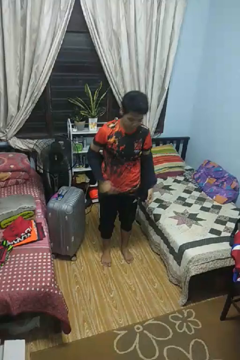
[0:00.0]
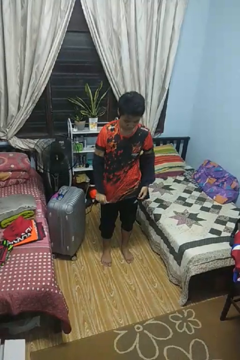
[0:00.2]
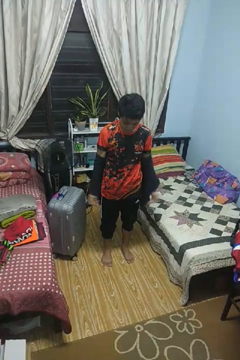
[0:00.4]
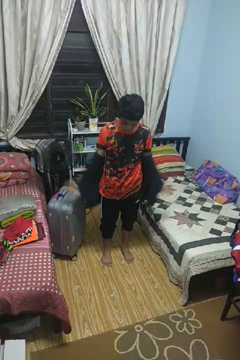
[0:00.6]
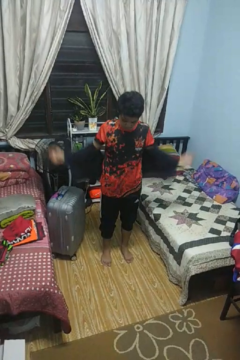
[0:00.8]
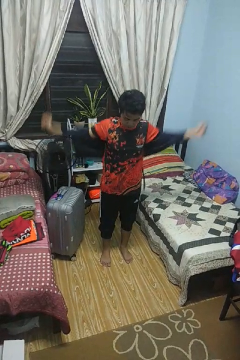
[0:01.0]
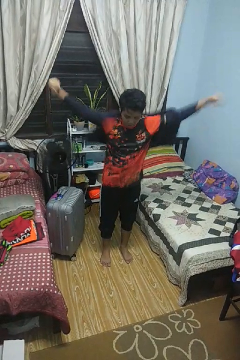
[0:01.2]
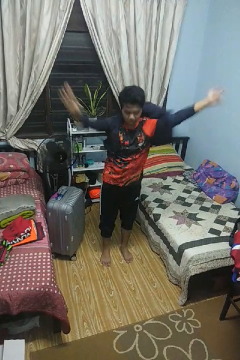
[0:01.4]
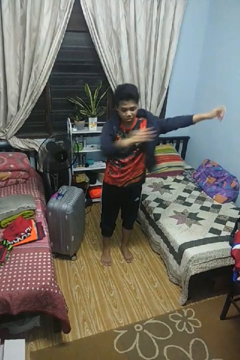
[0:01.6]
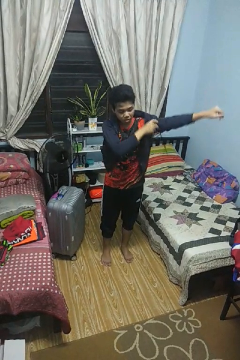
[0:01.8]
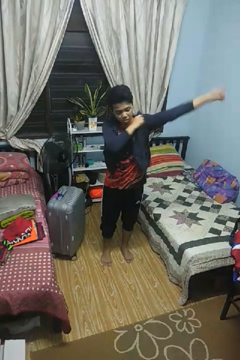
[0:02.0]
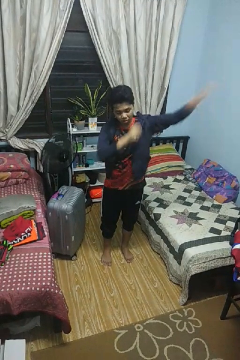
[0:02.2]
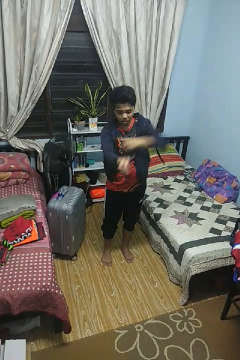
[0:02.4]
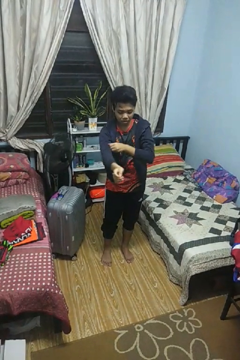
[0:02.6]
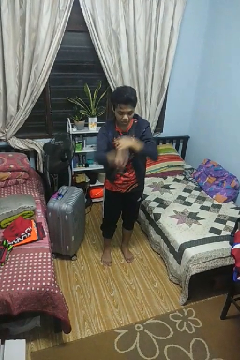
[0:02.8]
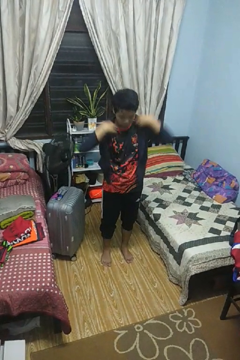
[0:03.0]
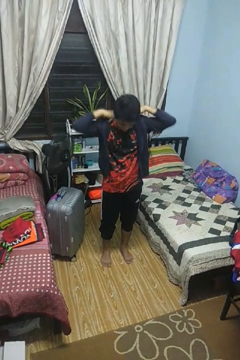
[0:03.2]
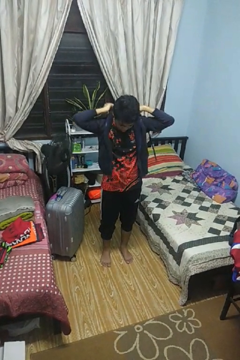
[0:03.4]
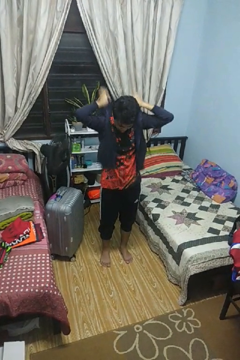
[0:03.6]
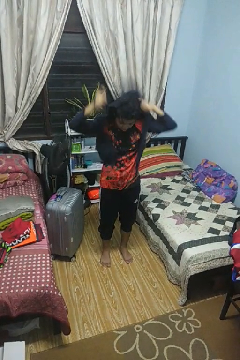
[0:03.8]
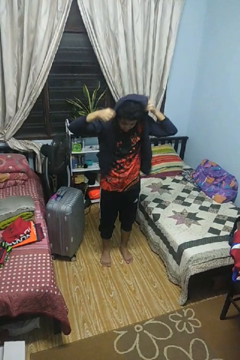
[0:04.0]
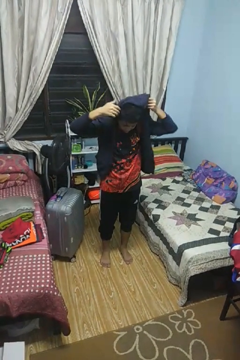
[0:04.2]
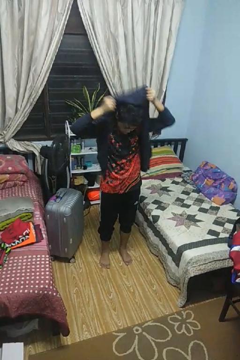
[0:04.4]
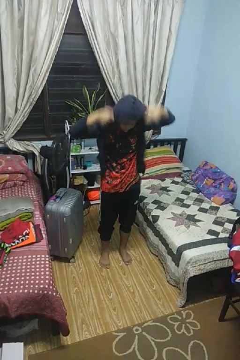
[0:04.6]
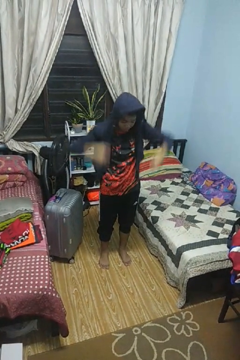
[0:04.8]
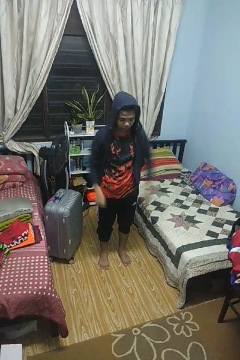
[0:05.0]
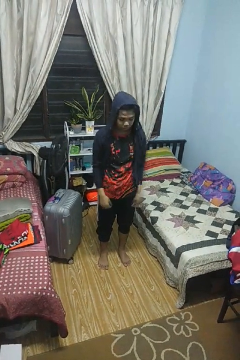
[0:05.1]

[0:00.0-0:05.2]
person puts on hoodie

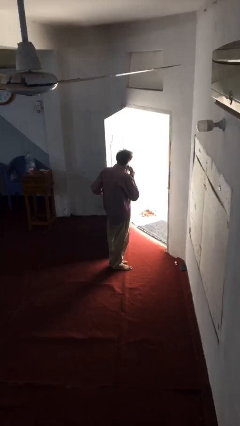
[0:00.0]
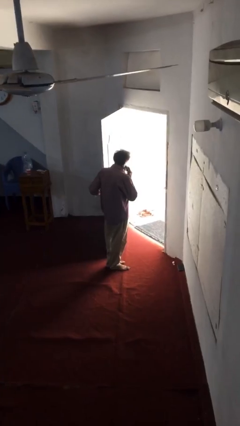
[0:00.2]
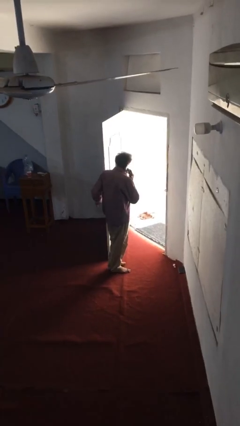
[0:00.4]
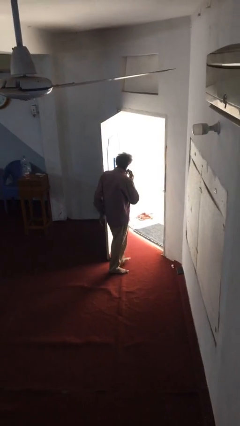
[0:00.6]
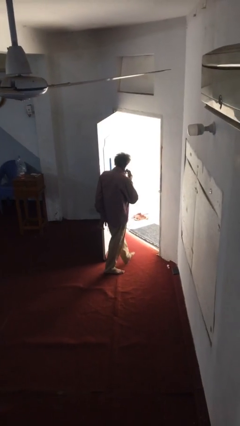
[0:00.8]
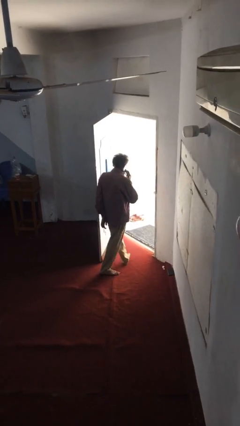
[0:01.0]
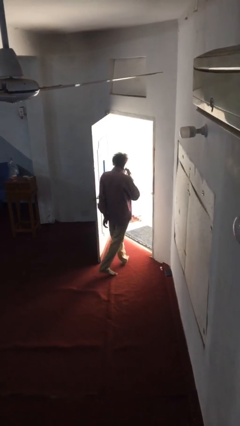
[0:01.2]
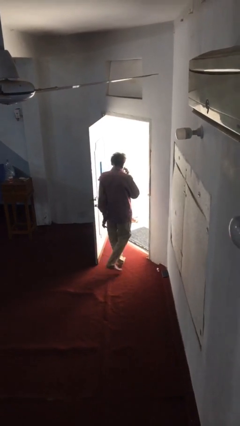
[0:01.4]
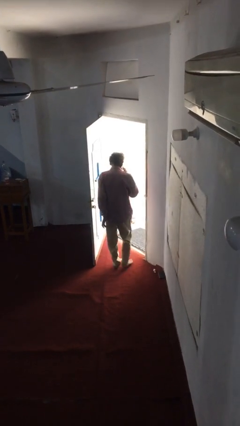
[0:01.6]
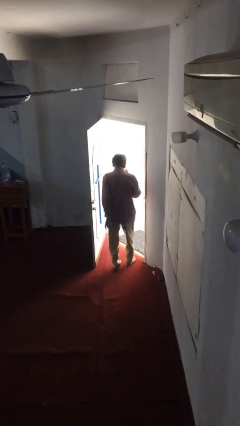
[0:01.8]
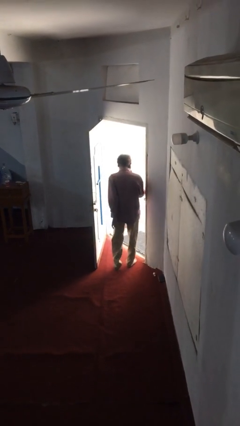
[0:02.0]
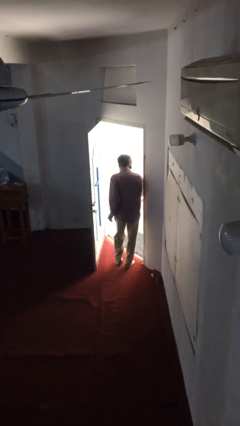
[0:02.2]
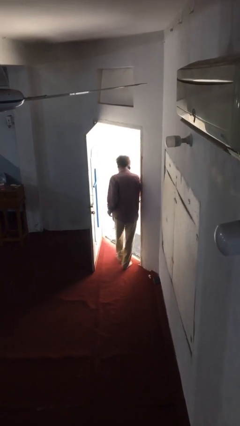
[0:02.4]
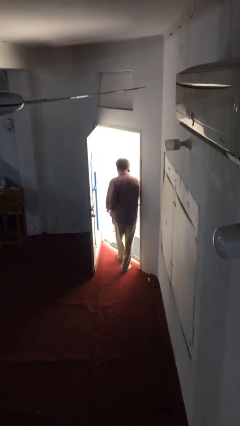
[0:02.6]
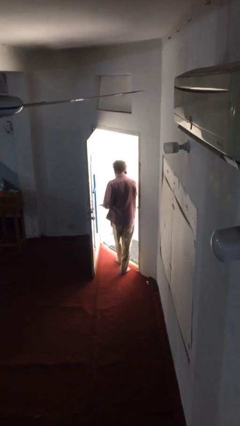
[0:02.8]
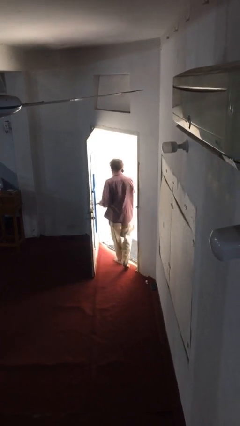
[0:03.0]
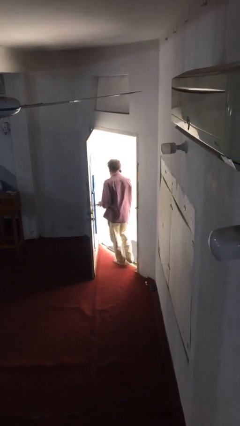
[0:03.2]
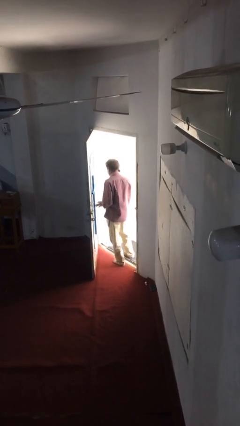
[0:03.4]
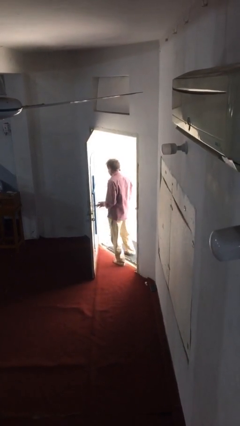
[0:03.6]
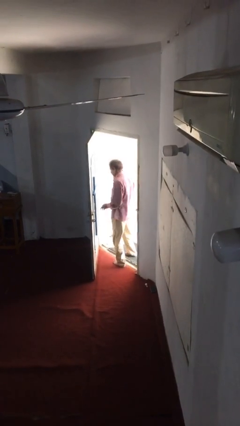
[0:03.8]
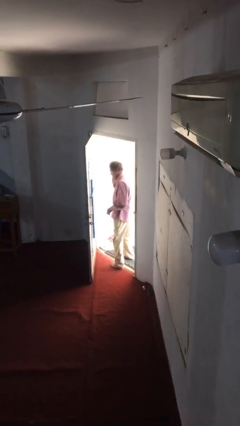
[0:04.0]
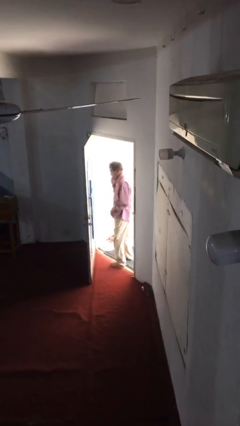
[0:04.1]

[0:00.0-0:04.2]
person exits scene through structure

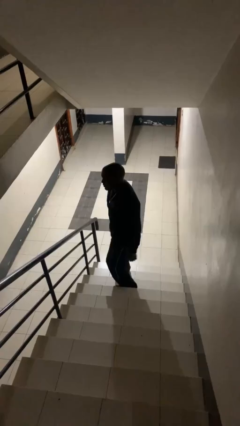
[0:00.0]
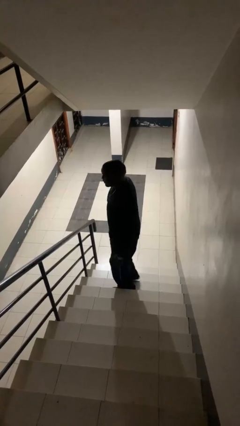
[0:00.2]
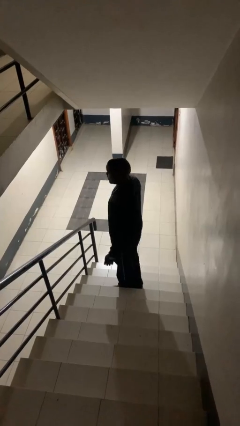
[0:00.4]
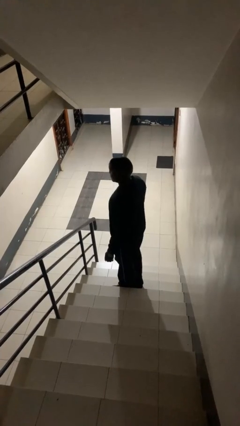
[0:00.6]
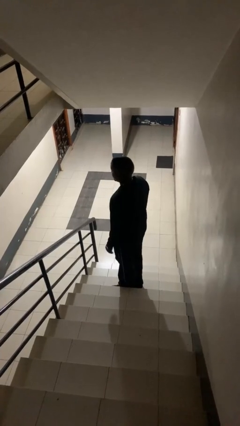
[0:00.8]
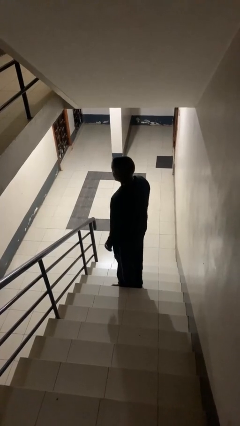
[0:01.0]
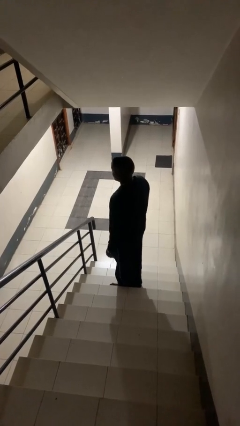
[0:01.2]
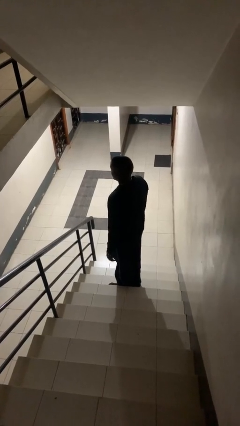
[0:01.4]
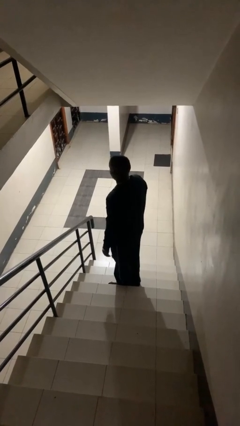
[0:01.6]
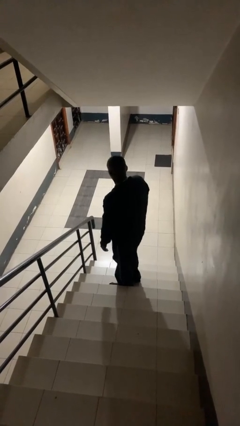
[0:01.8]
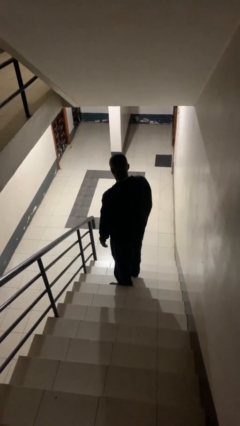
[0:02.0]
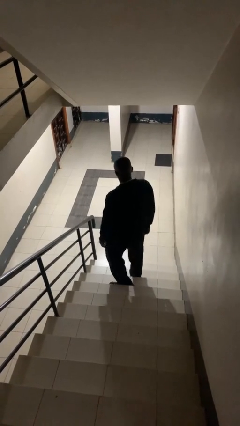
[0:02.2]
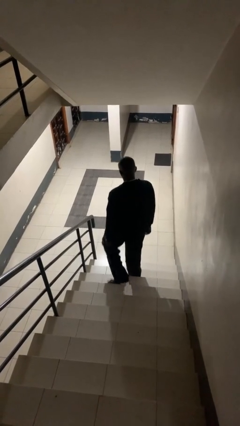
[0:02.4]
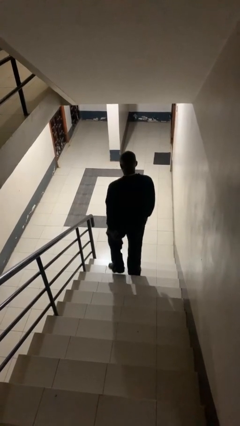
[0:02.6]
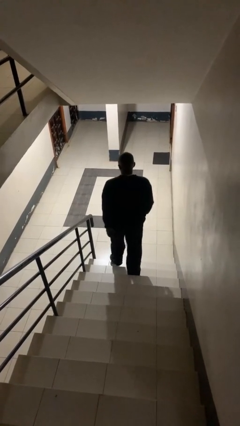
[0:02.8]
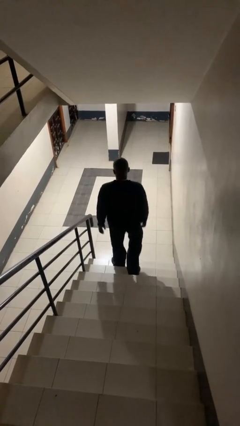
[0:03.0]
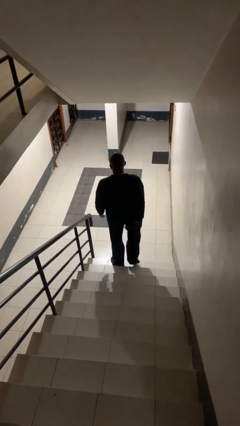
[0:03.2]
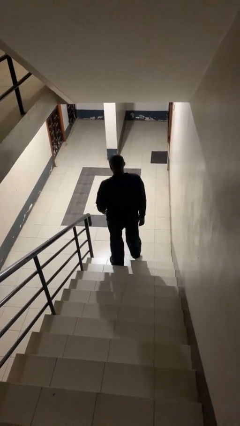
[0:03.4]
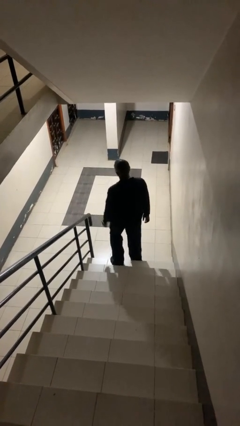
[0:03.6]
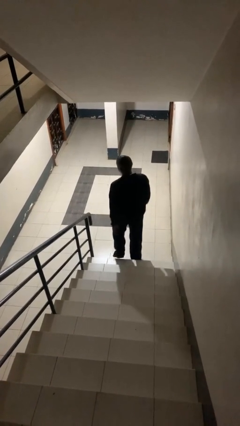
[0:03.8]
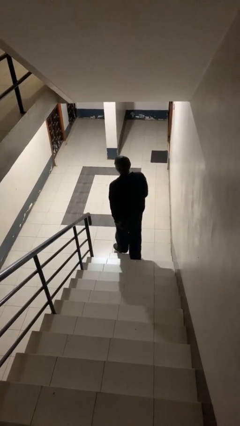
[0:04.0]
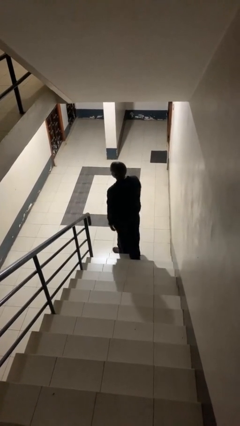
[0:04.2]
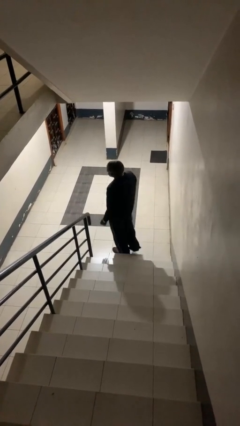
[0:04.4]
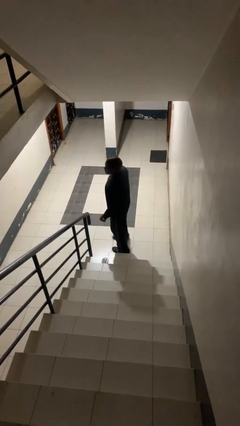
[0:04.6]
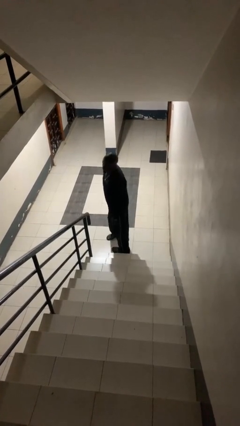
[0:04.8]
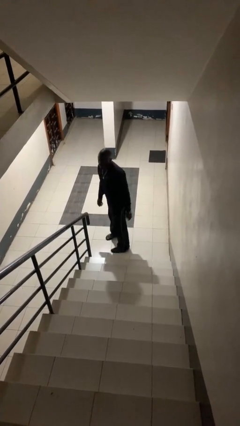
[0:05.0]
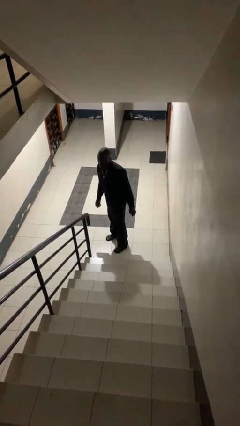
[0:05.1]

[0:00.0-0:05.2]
person climbs down stairs

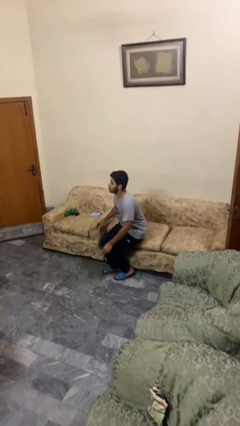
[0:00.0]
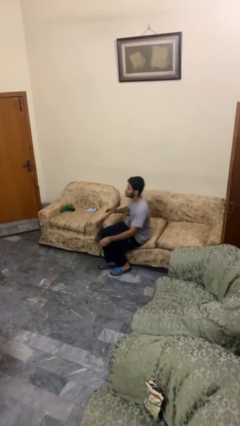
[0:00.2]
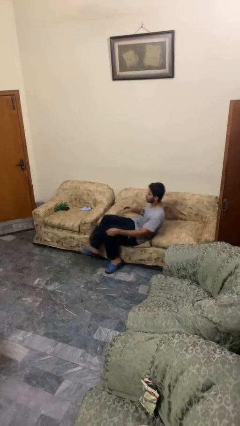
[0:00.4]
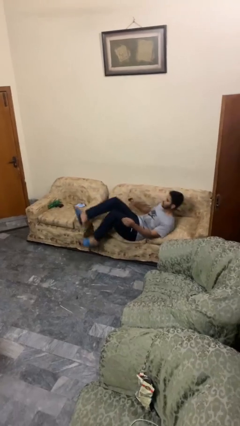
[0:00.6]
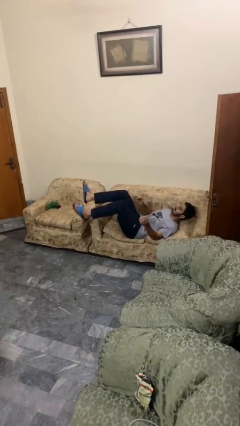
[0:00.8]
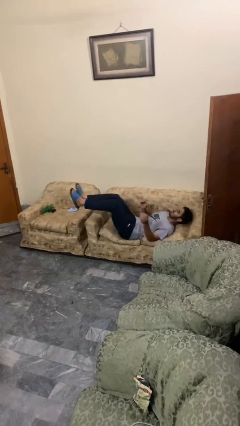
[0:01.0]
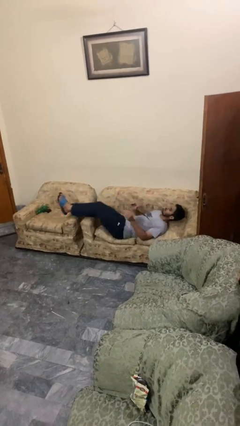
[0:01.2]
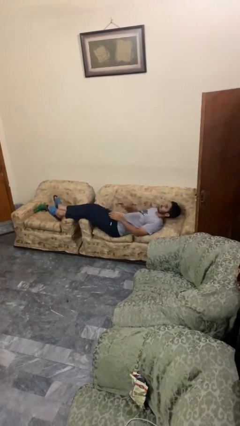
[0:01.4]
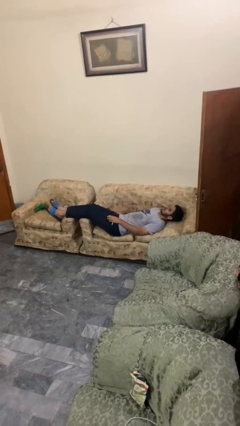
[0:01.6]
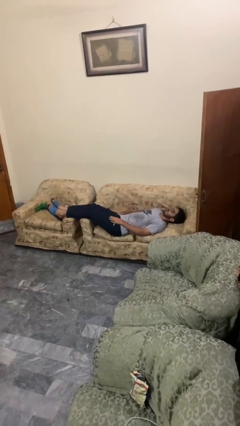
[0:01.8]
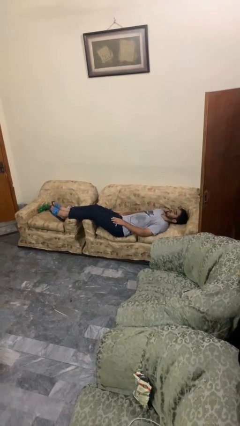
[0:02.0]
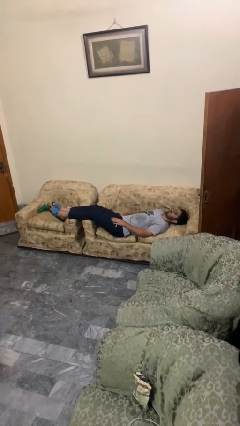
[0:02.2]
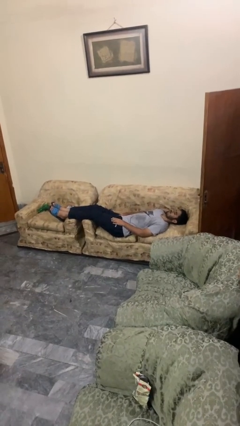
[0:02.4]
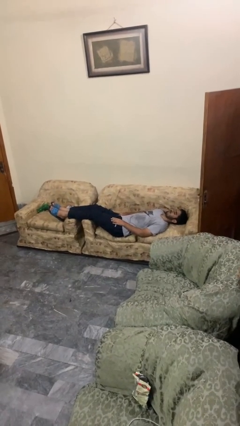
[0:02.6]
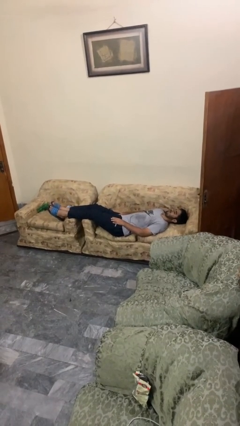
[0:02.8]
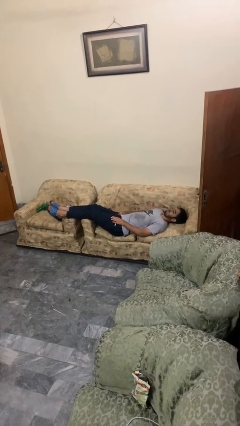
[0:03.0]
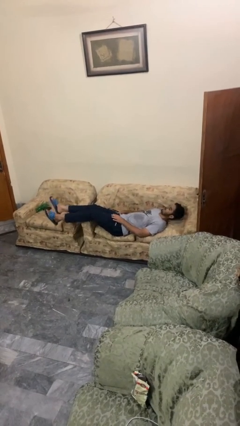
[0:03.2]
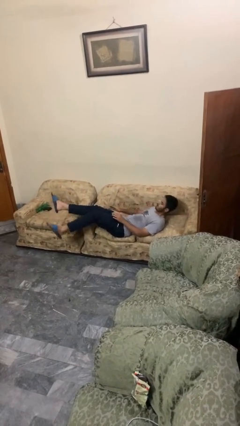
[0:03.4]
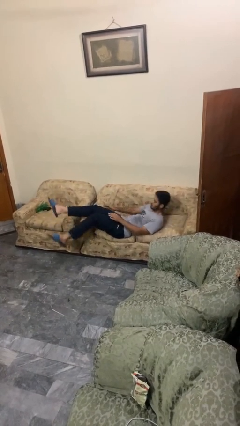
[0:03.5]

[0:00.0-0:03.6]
person lies down on couch

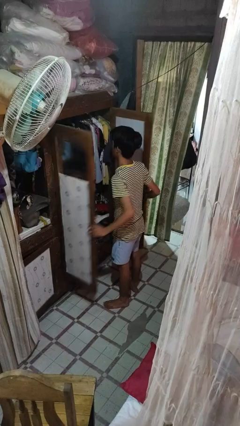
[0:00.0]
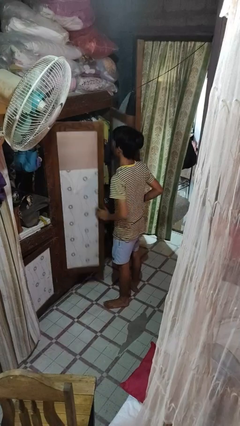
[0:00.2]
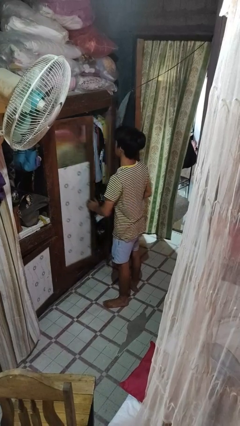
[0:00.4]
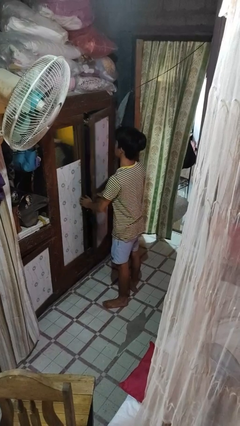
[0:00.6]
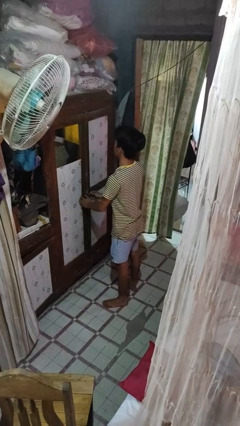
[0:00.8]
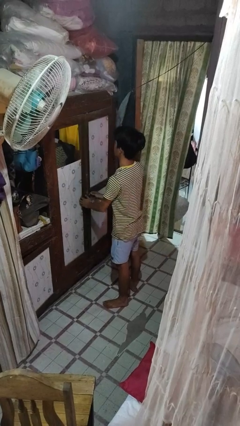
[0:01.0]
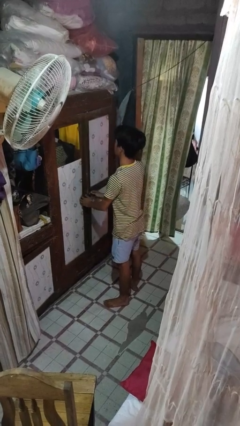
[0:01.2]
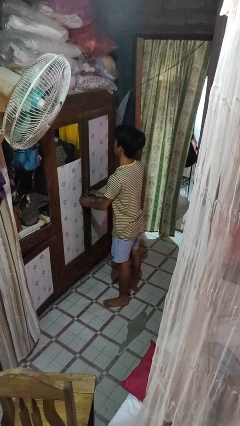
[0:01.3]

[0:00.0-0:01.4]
person closes closet door
